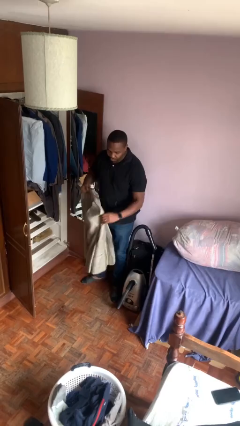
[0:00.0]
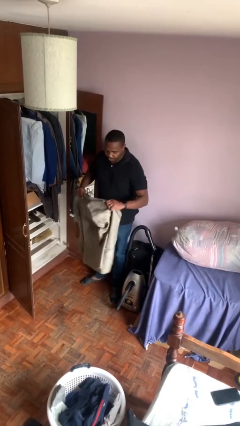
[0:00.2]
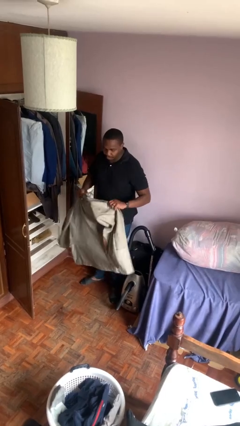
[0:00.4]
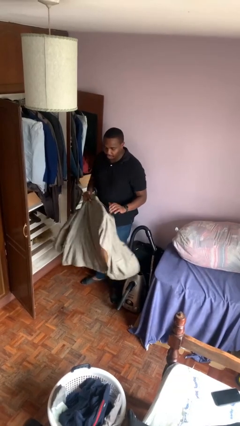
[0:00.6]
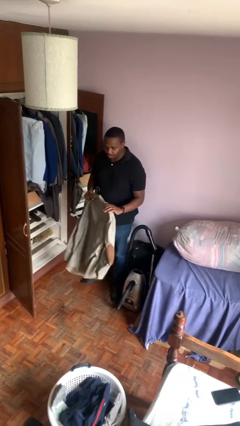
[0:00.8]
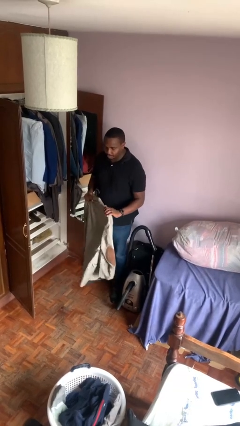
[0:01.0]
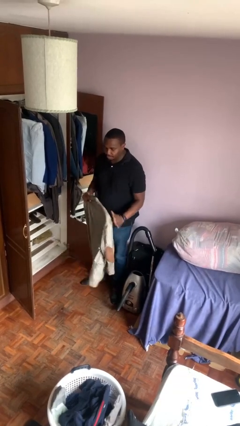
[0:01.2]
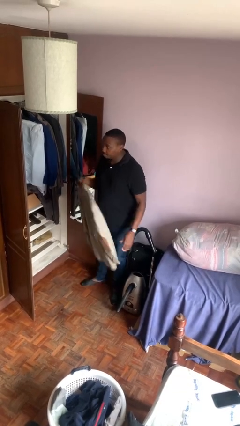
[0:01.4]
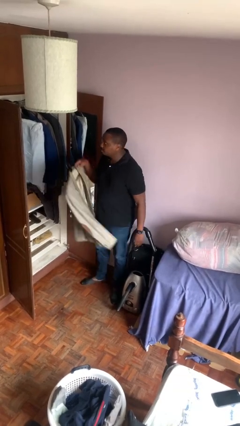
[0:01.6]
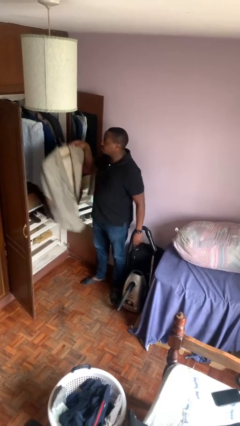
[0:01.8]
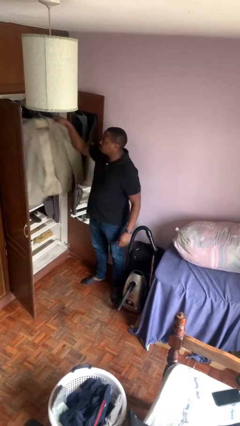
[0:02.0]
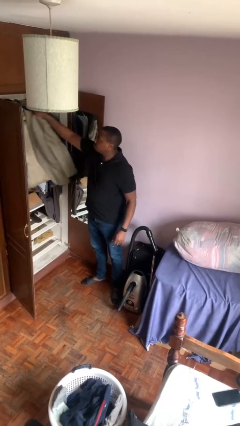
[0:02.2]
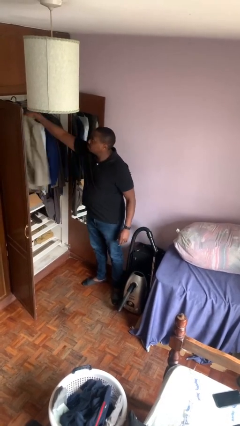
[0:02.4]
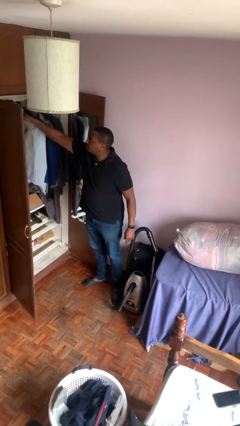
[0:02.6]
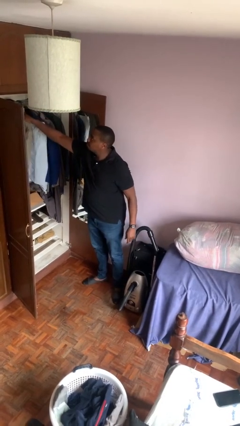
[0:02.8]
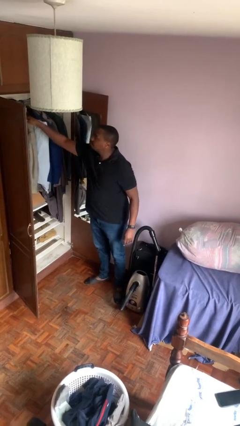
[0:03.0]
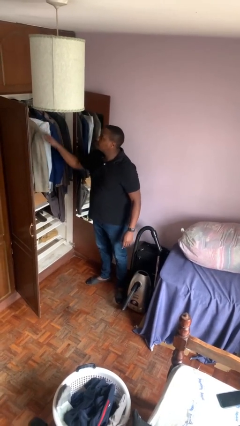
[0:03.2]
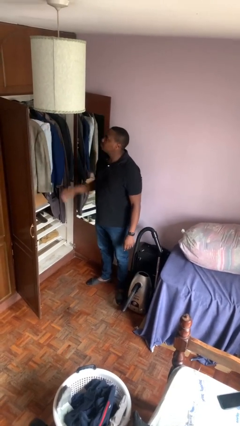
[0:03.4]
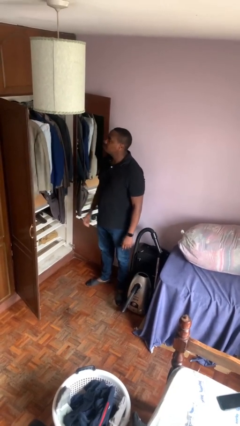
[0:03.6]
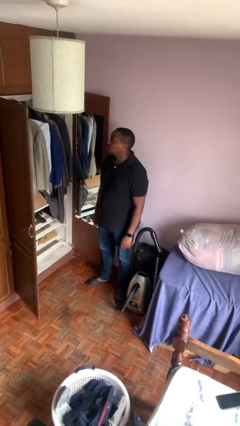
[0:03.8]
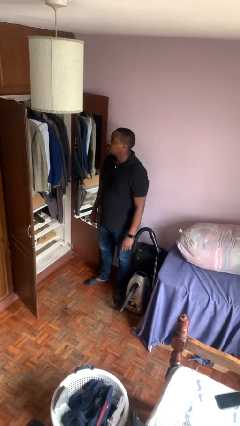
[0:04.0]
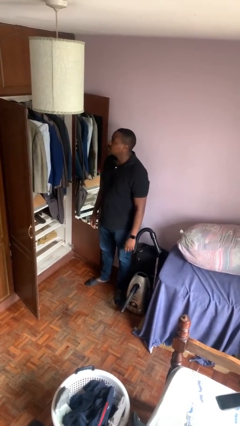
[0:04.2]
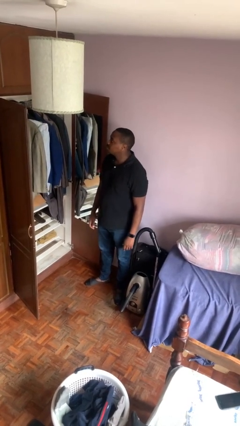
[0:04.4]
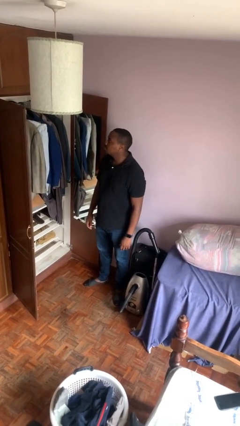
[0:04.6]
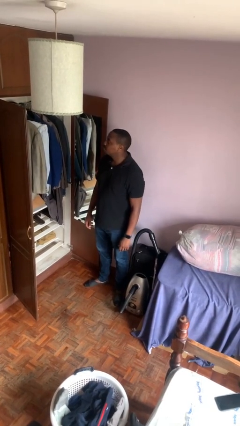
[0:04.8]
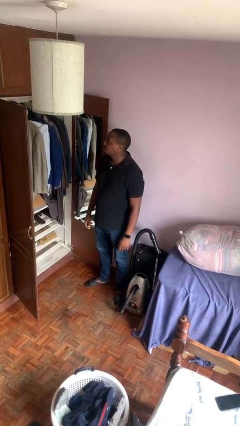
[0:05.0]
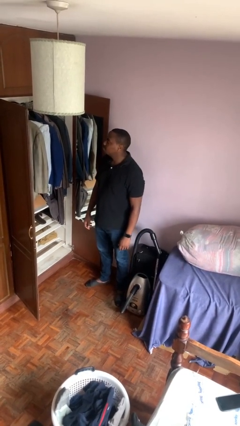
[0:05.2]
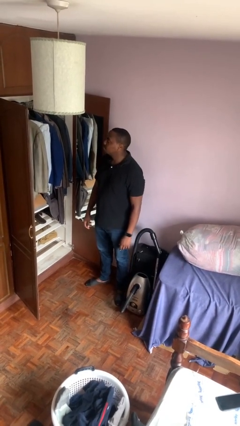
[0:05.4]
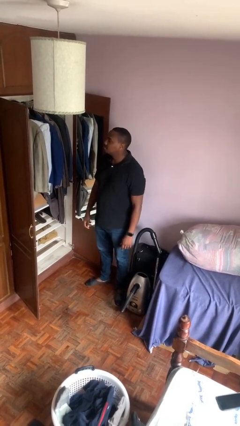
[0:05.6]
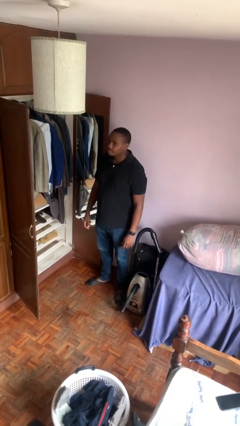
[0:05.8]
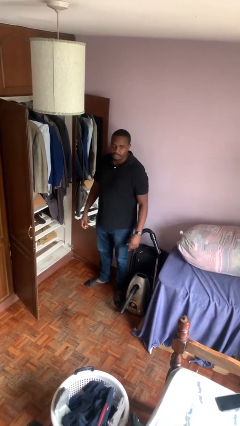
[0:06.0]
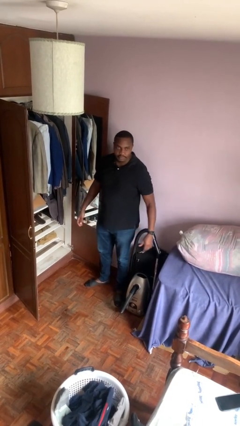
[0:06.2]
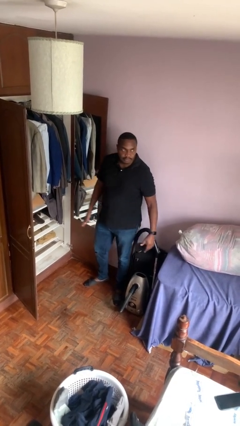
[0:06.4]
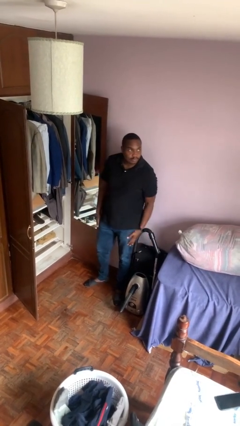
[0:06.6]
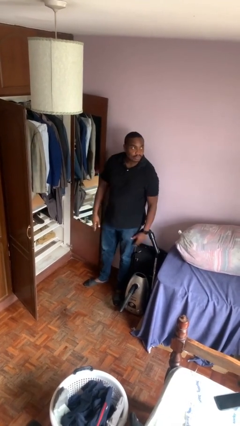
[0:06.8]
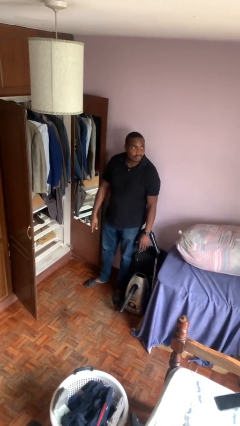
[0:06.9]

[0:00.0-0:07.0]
person puts clothes into closet

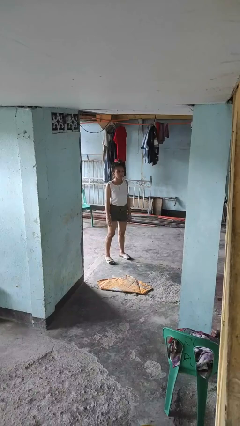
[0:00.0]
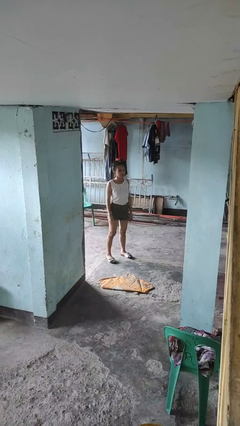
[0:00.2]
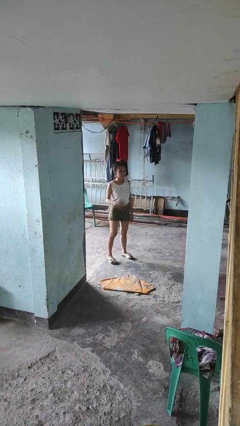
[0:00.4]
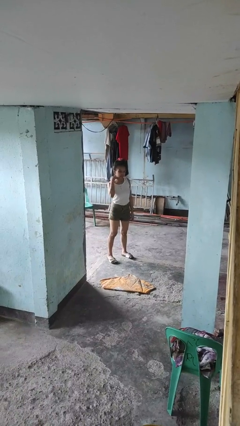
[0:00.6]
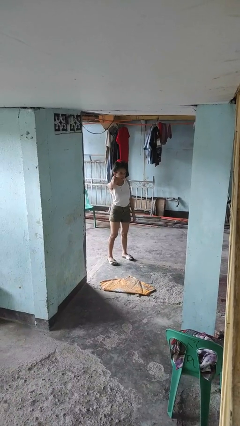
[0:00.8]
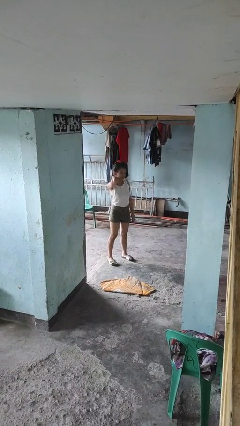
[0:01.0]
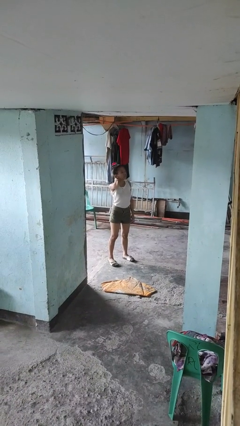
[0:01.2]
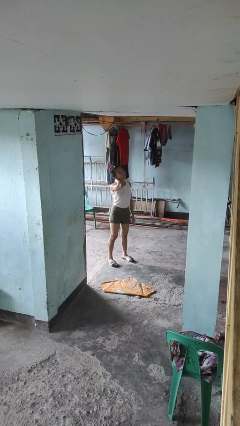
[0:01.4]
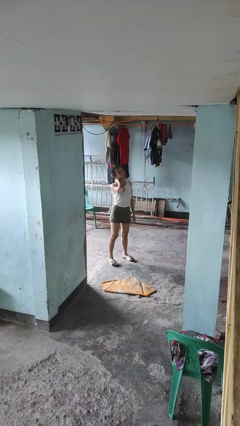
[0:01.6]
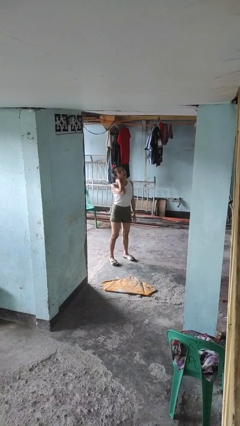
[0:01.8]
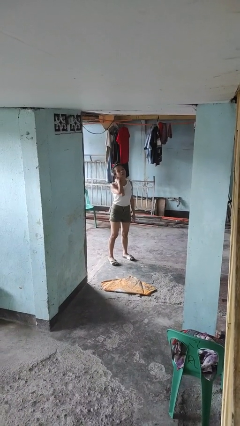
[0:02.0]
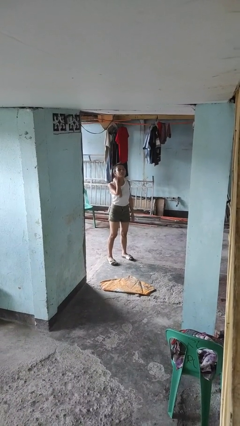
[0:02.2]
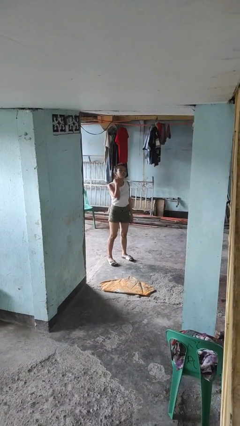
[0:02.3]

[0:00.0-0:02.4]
person rubs neck

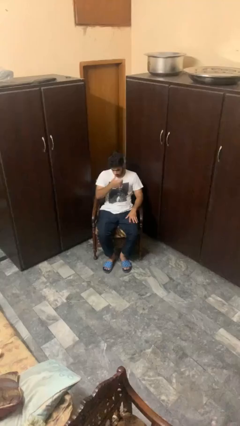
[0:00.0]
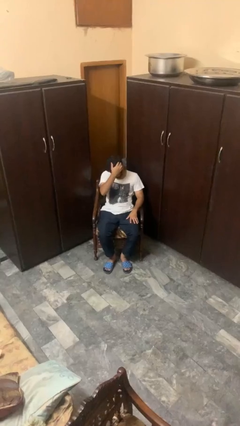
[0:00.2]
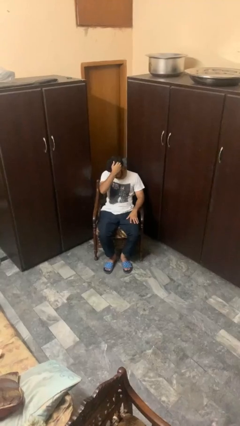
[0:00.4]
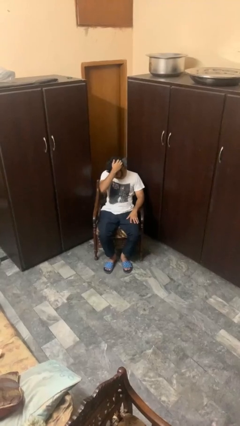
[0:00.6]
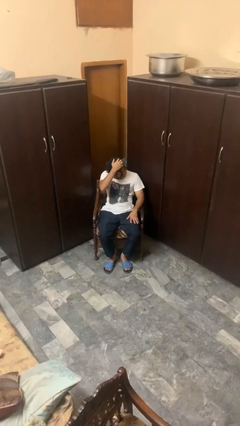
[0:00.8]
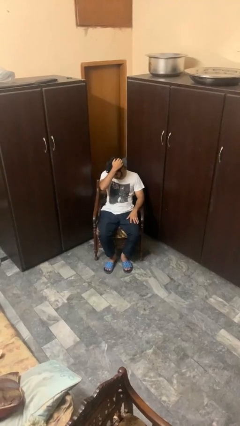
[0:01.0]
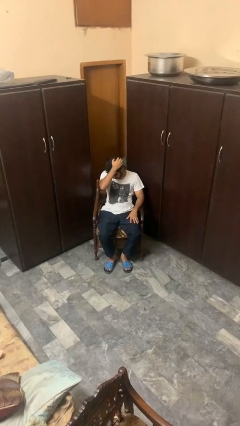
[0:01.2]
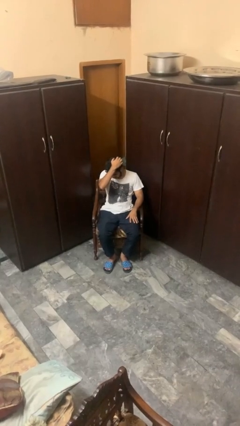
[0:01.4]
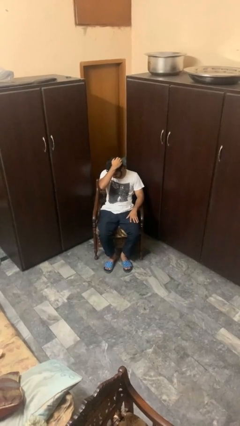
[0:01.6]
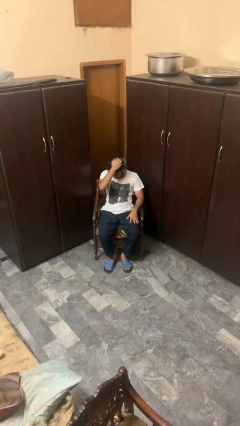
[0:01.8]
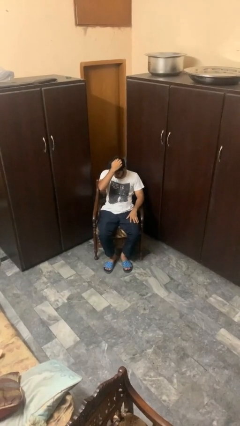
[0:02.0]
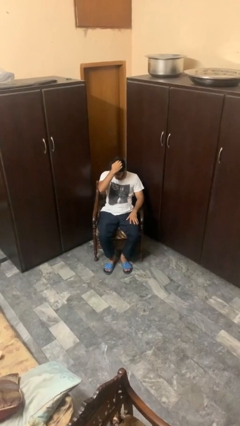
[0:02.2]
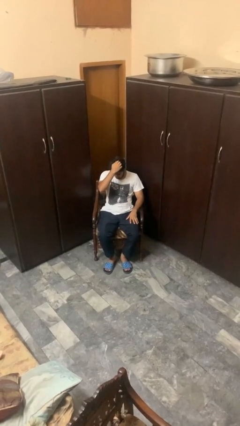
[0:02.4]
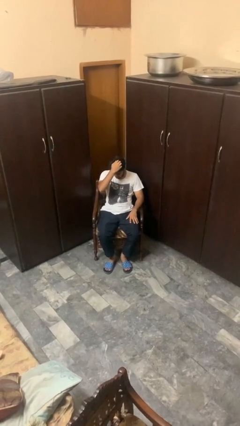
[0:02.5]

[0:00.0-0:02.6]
person scratches face

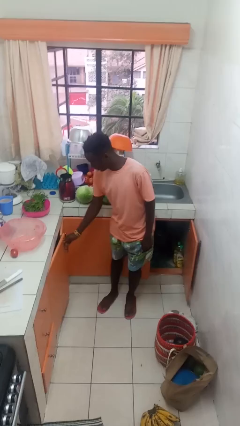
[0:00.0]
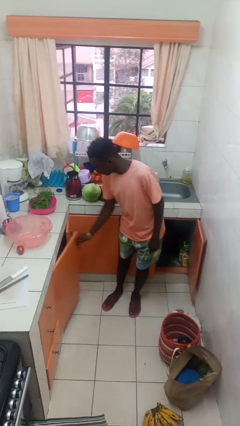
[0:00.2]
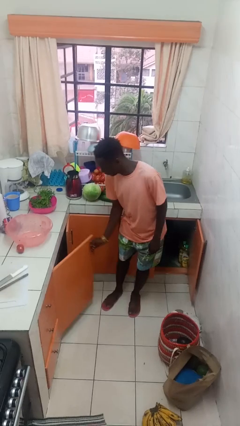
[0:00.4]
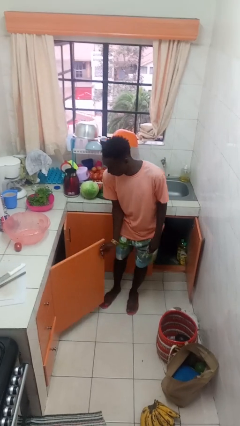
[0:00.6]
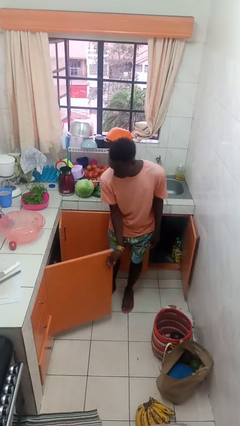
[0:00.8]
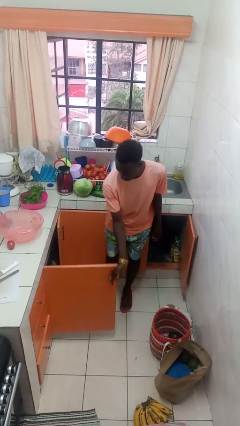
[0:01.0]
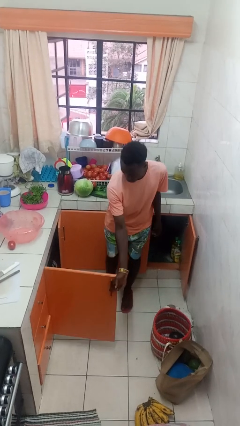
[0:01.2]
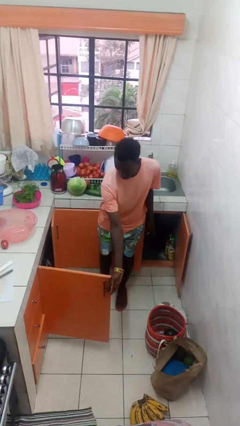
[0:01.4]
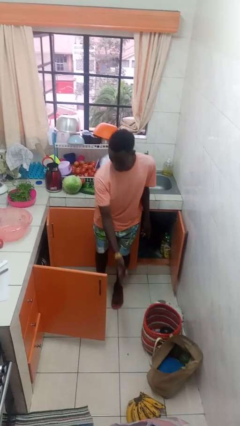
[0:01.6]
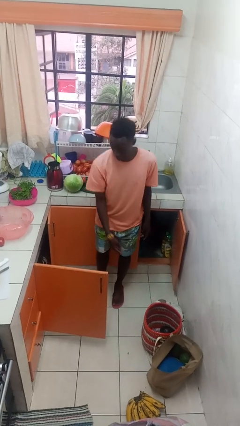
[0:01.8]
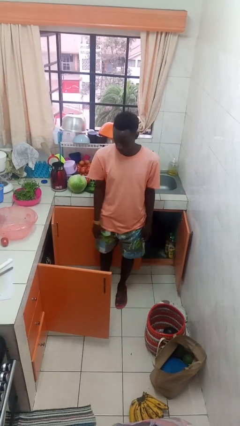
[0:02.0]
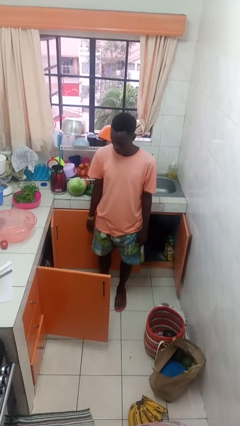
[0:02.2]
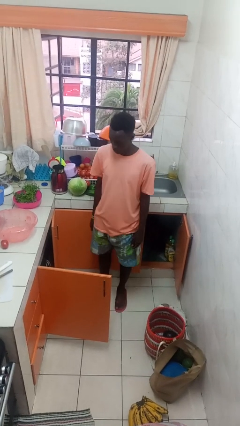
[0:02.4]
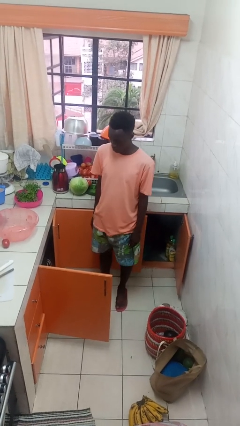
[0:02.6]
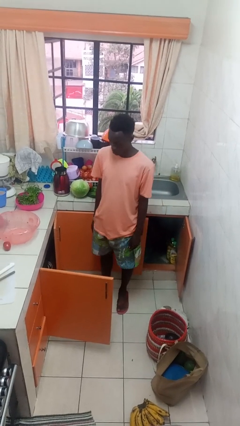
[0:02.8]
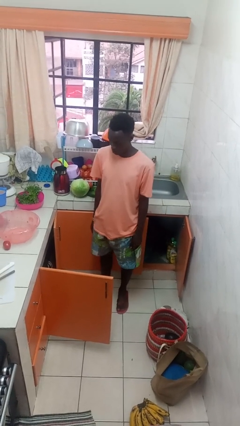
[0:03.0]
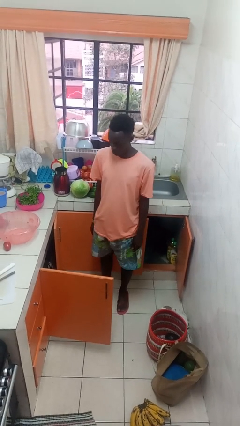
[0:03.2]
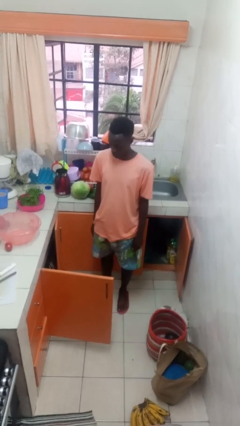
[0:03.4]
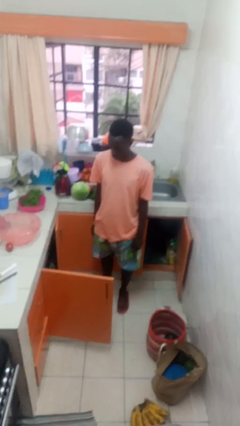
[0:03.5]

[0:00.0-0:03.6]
person opens cabinet
